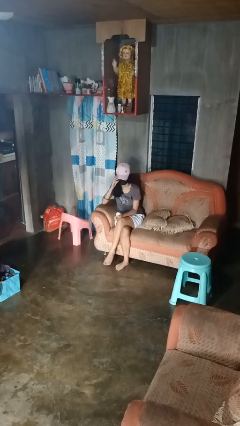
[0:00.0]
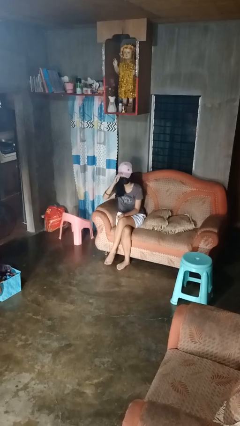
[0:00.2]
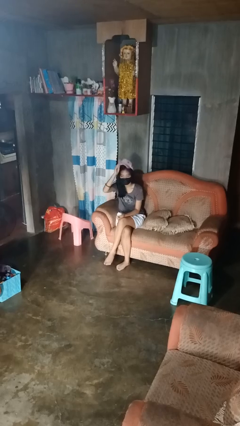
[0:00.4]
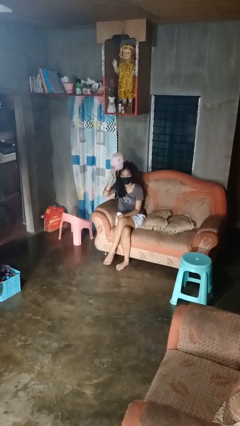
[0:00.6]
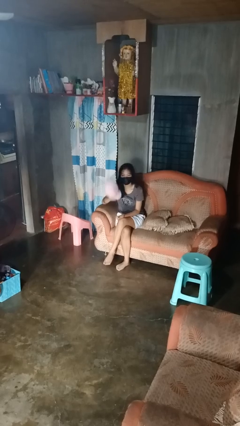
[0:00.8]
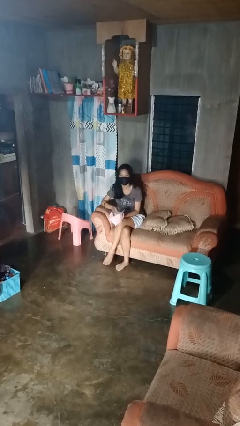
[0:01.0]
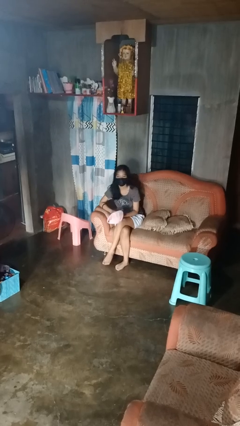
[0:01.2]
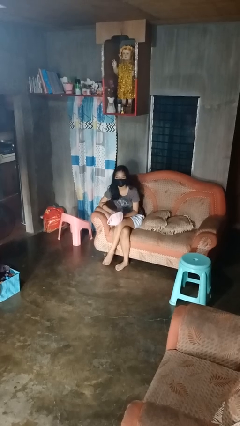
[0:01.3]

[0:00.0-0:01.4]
person takes off hat

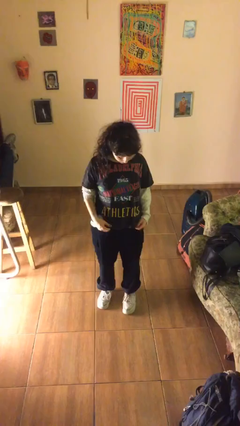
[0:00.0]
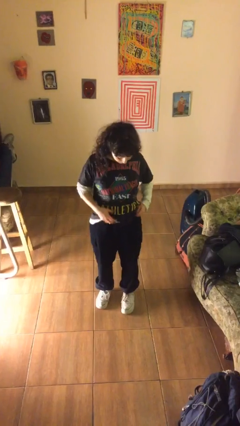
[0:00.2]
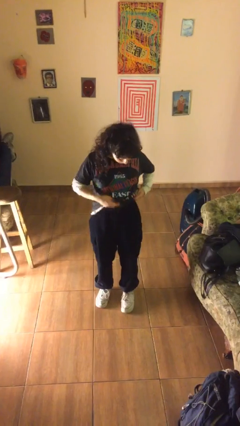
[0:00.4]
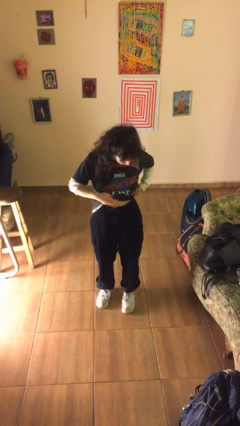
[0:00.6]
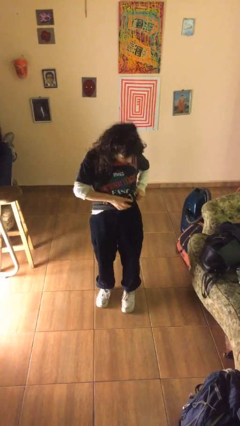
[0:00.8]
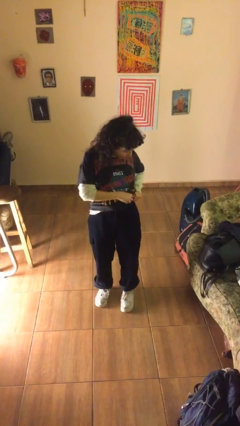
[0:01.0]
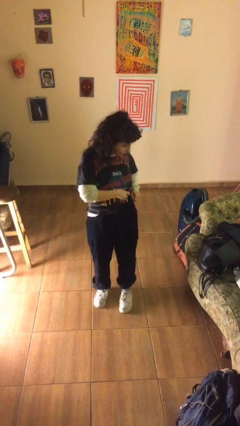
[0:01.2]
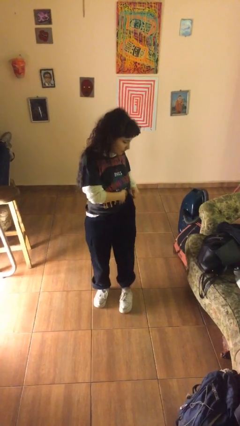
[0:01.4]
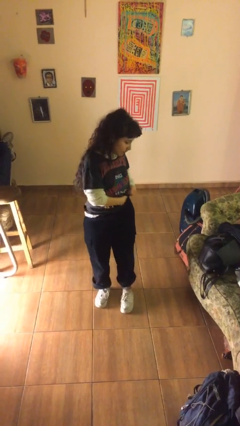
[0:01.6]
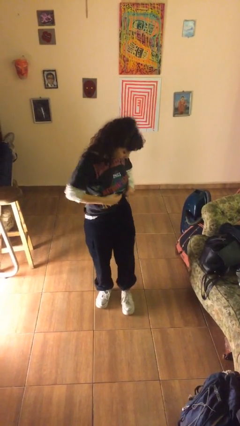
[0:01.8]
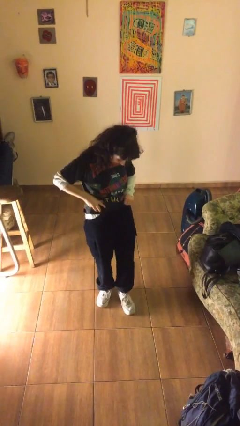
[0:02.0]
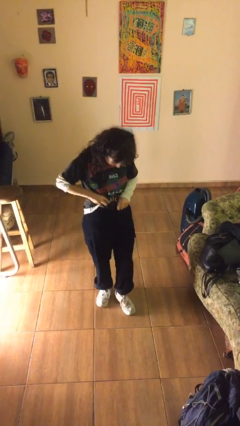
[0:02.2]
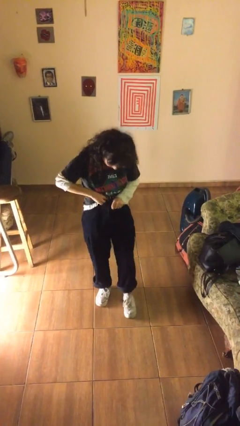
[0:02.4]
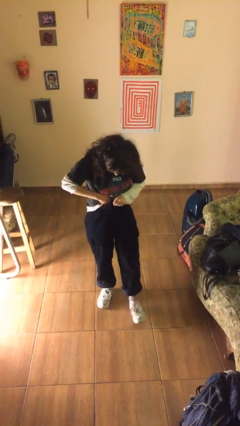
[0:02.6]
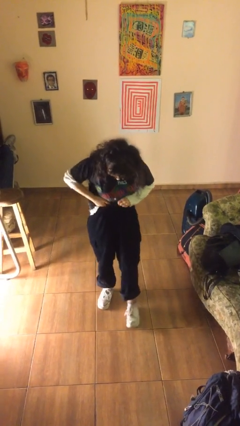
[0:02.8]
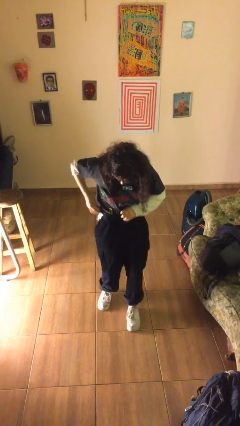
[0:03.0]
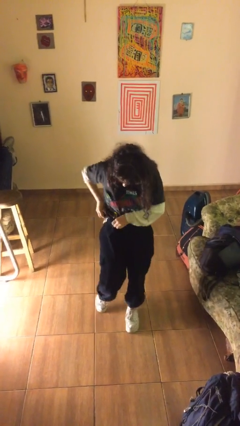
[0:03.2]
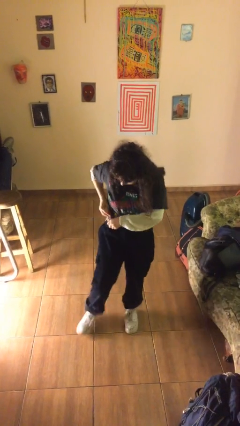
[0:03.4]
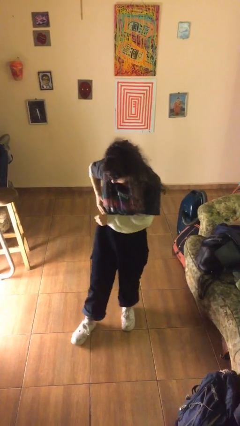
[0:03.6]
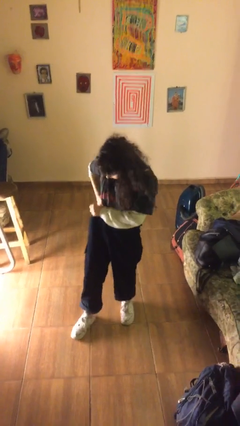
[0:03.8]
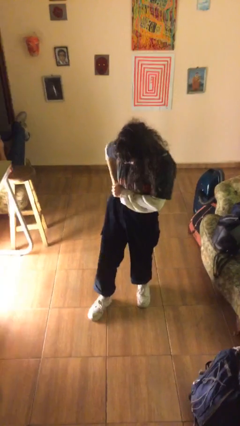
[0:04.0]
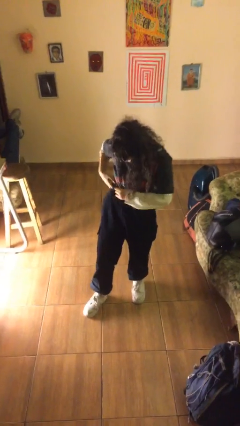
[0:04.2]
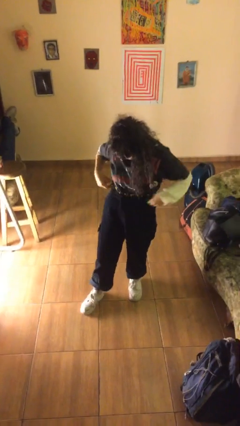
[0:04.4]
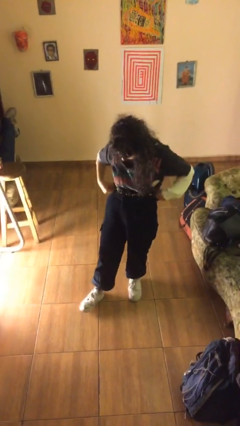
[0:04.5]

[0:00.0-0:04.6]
person tucks in shirt

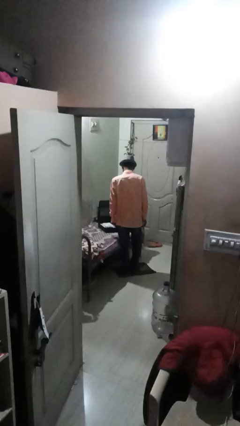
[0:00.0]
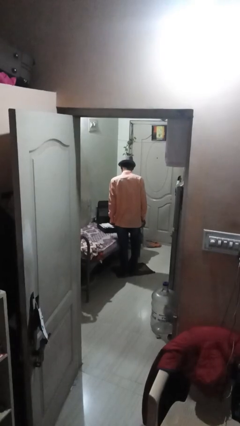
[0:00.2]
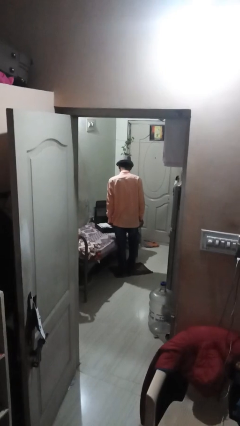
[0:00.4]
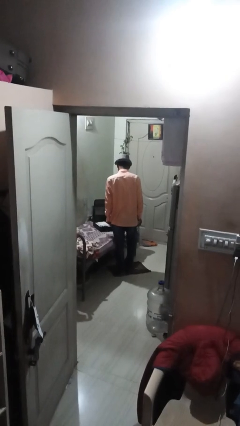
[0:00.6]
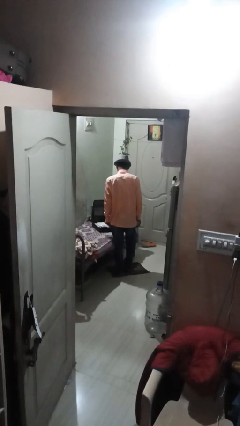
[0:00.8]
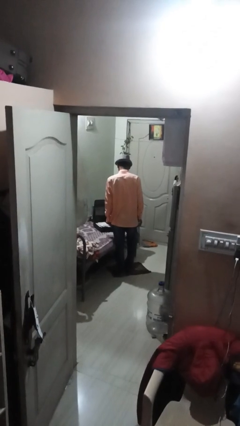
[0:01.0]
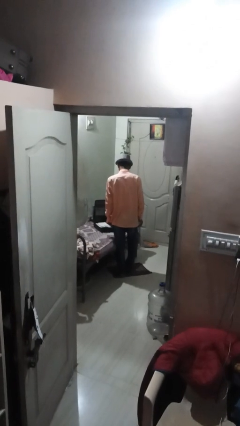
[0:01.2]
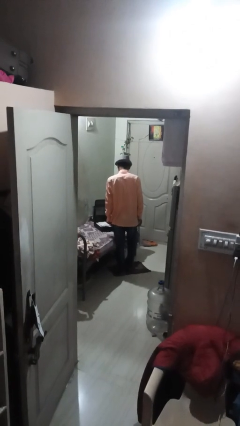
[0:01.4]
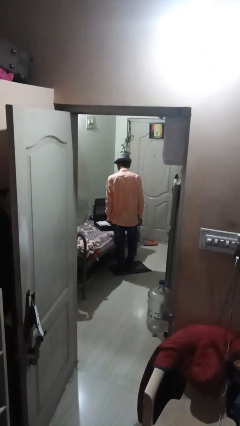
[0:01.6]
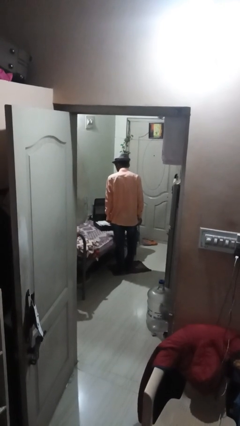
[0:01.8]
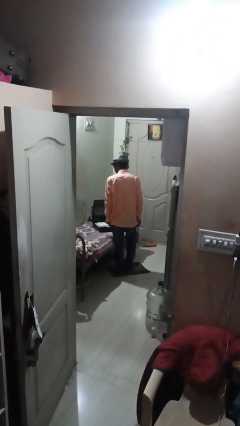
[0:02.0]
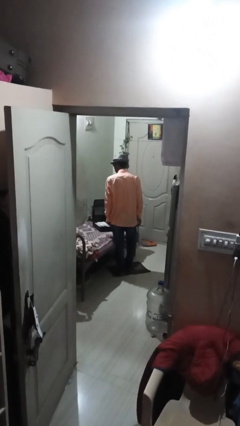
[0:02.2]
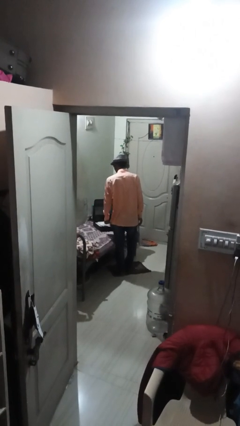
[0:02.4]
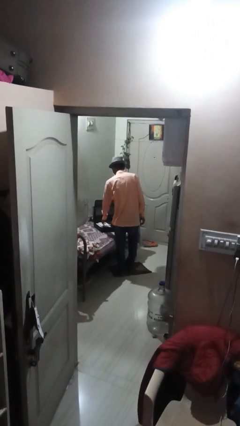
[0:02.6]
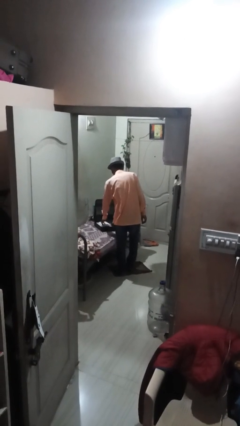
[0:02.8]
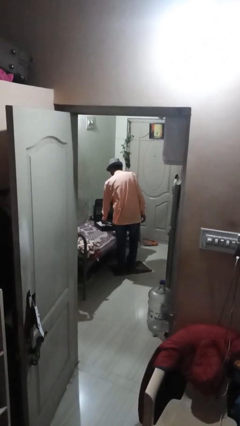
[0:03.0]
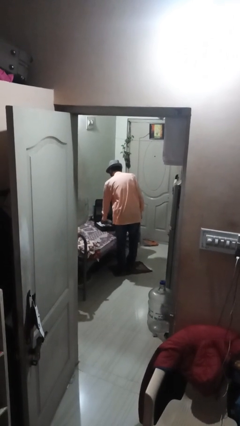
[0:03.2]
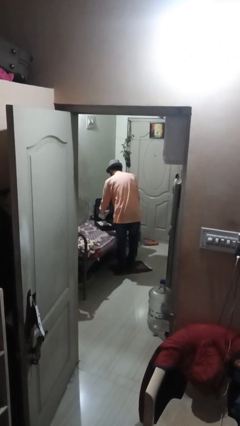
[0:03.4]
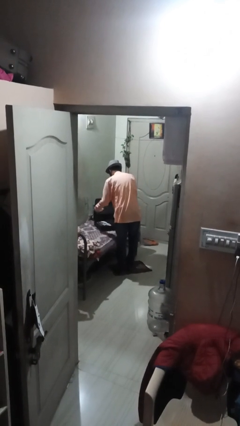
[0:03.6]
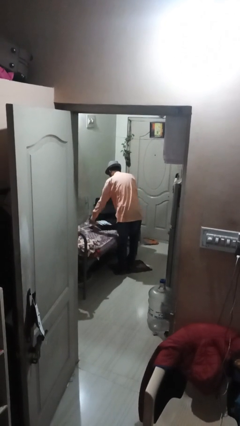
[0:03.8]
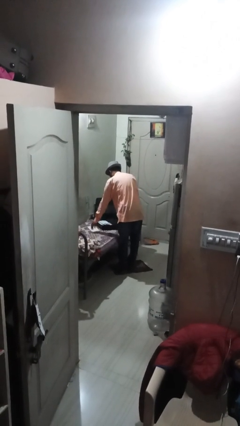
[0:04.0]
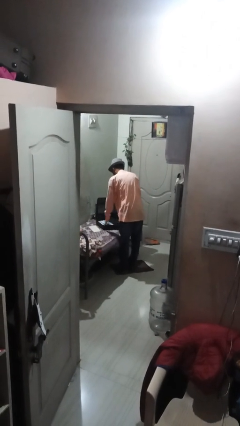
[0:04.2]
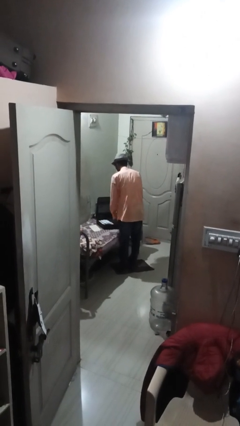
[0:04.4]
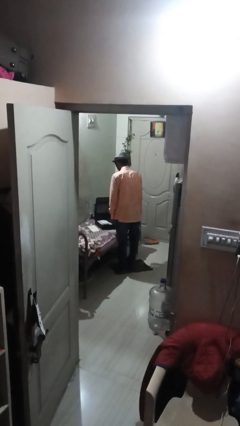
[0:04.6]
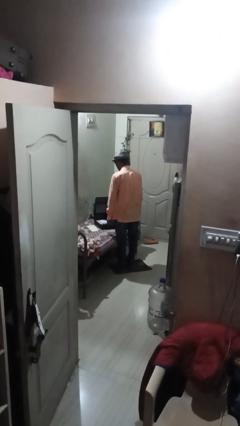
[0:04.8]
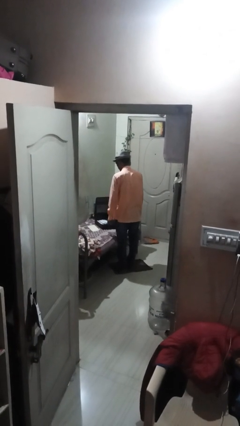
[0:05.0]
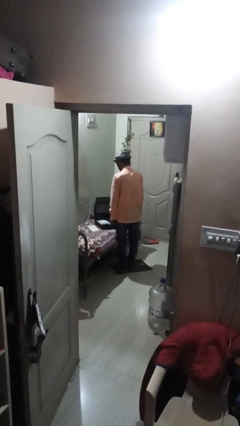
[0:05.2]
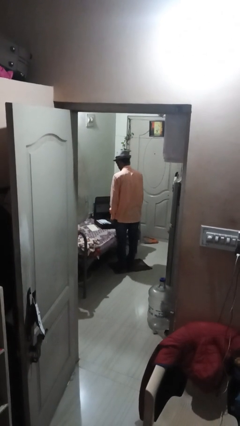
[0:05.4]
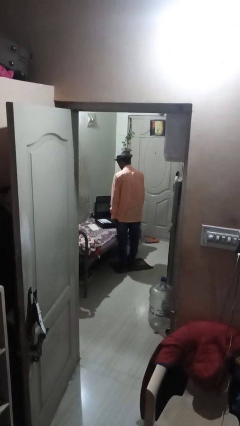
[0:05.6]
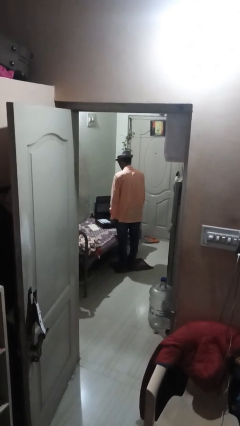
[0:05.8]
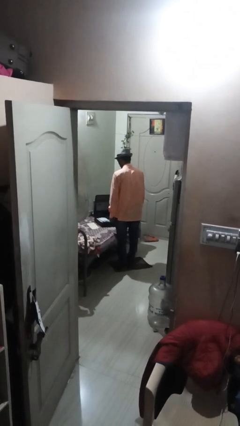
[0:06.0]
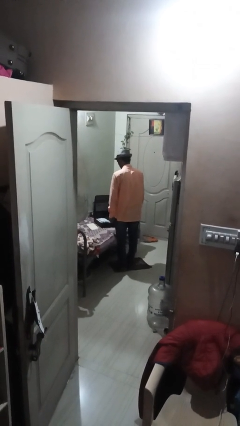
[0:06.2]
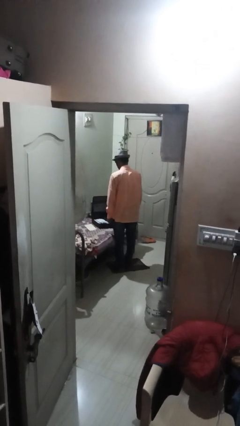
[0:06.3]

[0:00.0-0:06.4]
person unloads clothes from suitcase

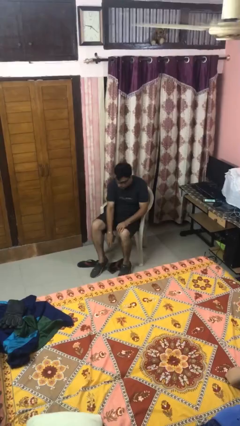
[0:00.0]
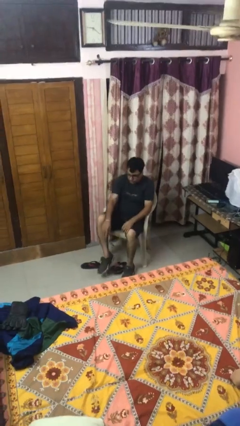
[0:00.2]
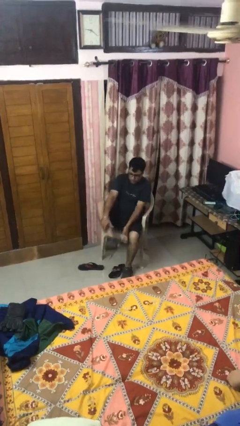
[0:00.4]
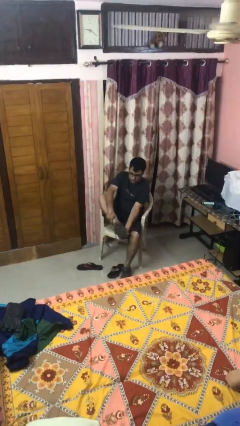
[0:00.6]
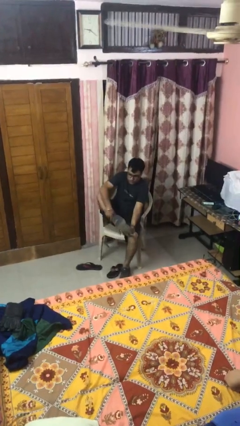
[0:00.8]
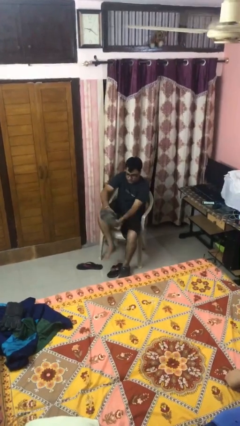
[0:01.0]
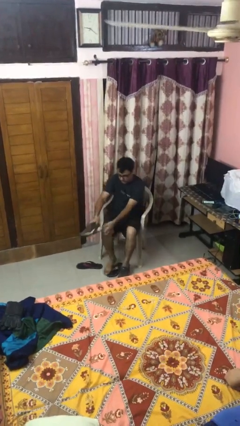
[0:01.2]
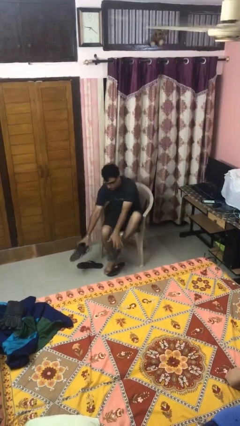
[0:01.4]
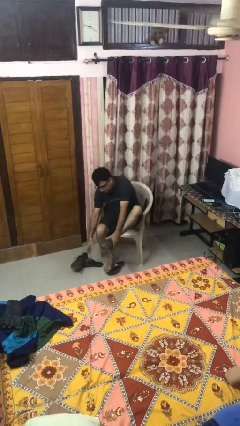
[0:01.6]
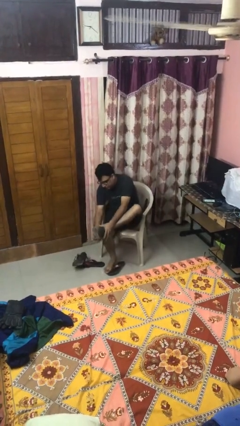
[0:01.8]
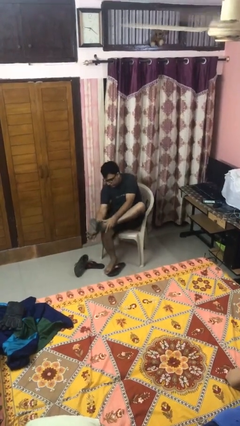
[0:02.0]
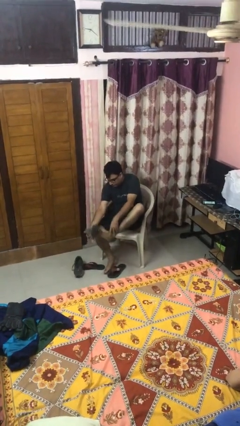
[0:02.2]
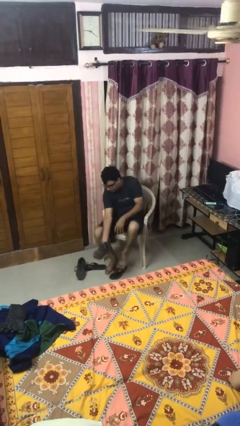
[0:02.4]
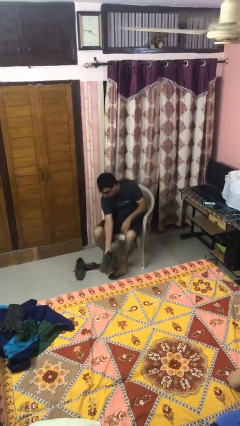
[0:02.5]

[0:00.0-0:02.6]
person takes off shoes

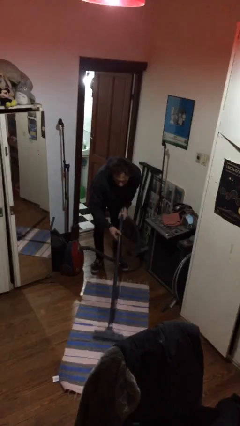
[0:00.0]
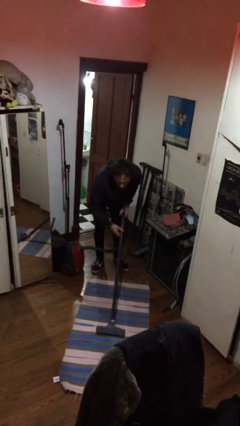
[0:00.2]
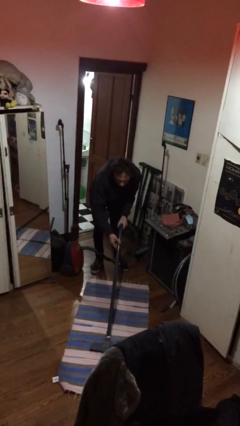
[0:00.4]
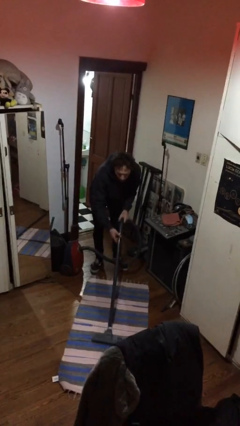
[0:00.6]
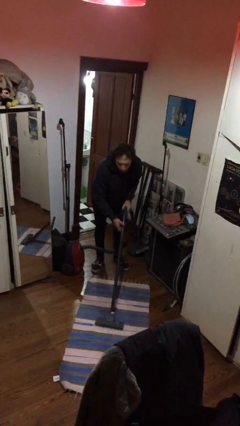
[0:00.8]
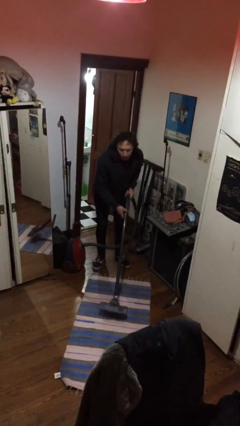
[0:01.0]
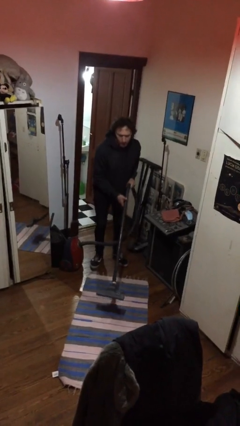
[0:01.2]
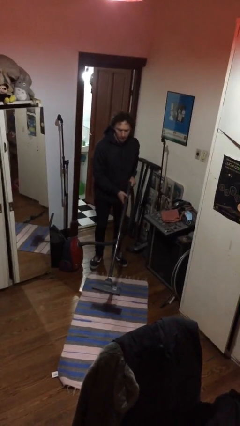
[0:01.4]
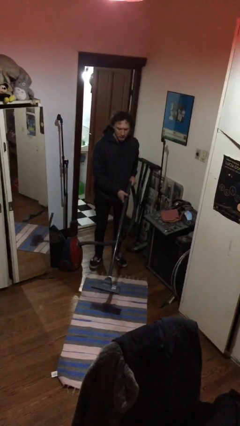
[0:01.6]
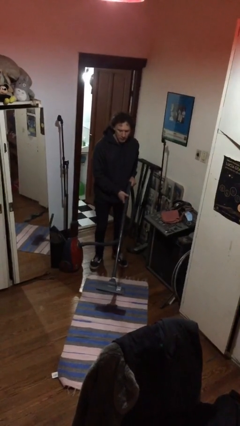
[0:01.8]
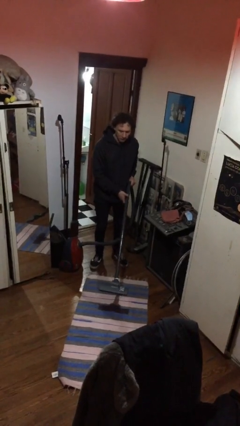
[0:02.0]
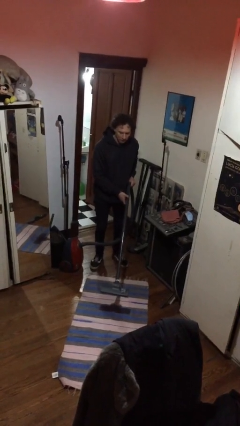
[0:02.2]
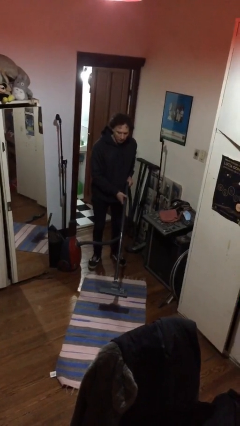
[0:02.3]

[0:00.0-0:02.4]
person vacuums carpet
